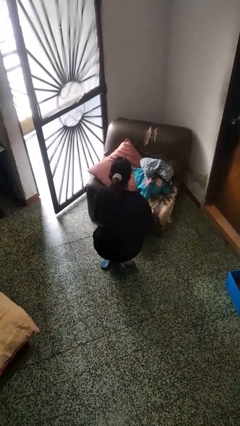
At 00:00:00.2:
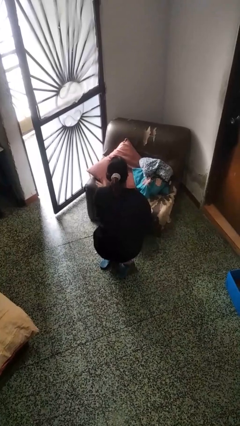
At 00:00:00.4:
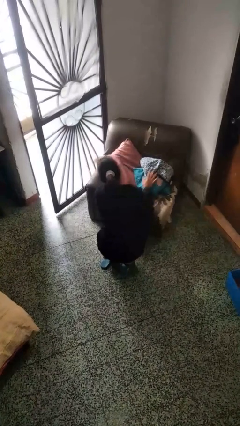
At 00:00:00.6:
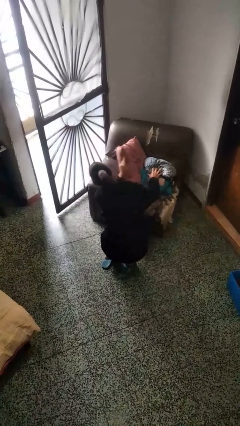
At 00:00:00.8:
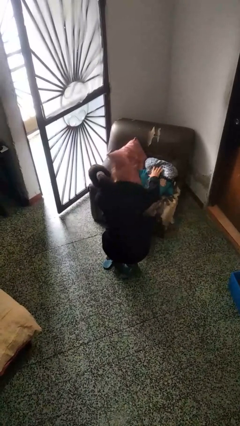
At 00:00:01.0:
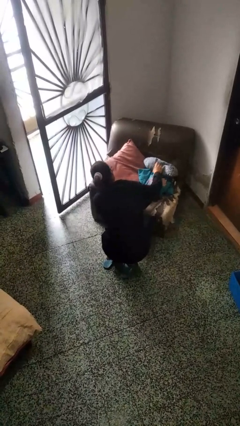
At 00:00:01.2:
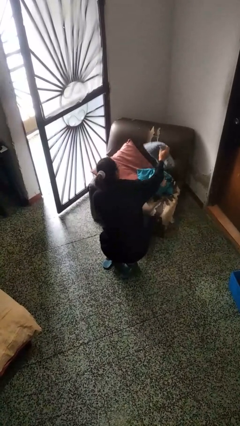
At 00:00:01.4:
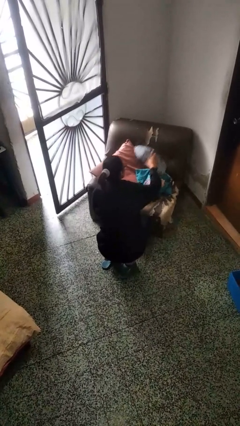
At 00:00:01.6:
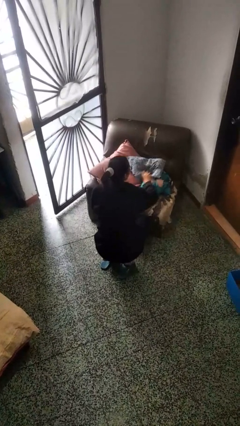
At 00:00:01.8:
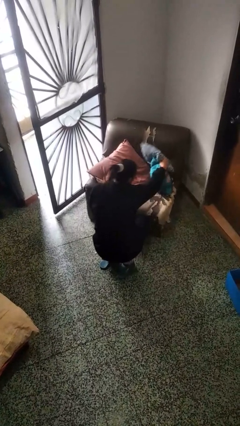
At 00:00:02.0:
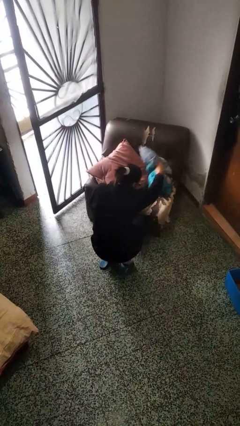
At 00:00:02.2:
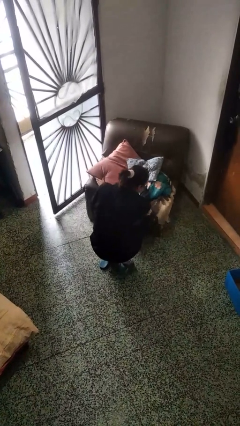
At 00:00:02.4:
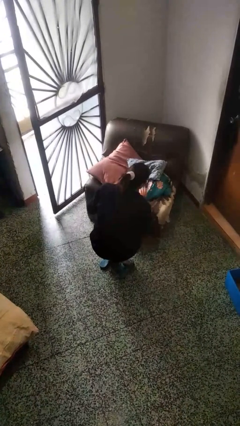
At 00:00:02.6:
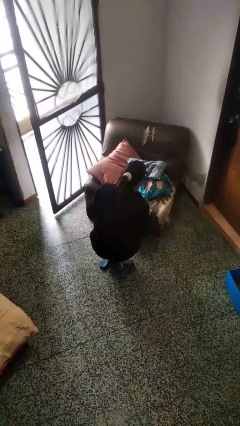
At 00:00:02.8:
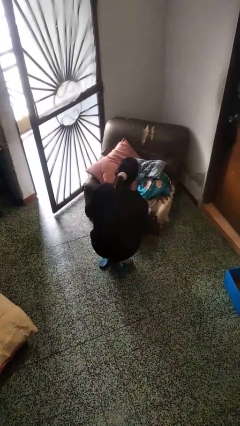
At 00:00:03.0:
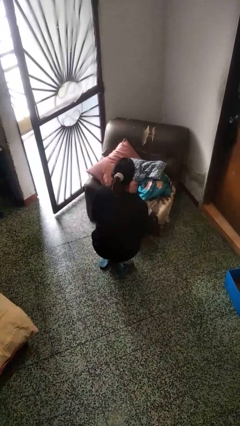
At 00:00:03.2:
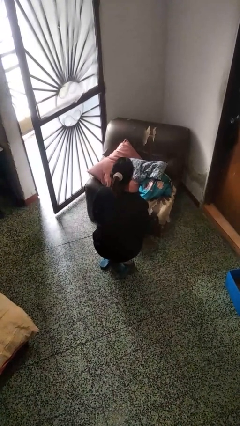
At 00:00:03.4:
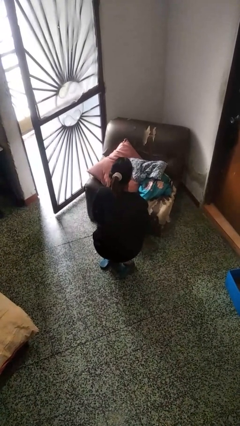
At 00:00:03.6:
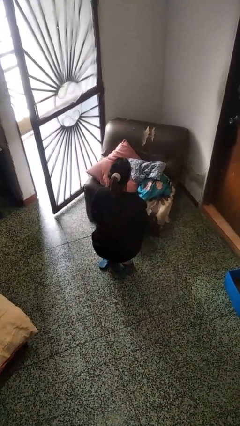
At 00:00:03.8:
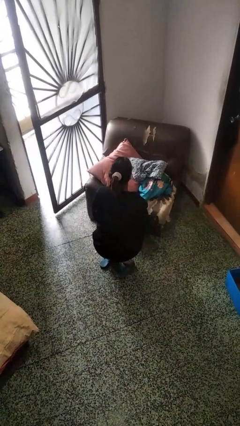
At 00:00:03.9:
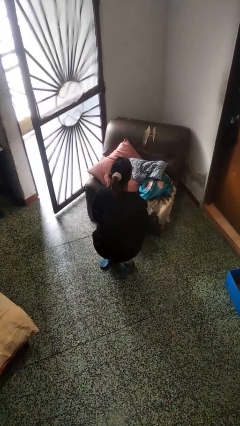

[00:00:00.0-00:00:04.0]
person searches in couch

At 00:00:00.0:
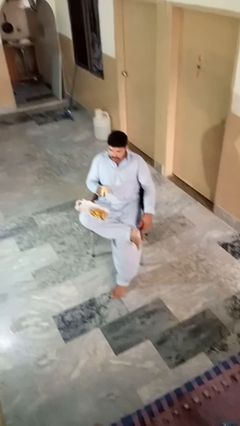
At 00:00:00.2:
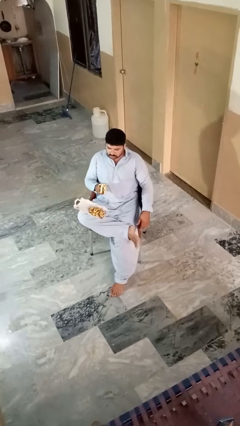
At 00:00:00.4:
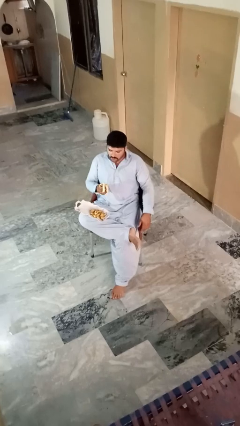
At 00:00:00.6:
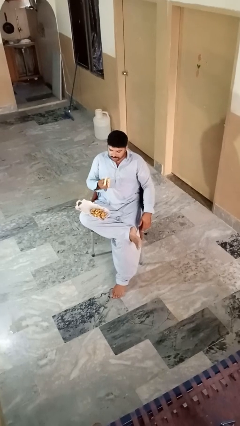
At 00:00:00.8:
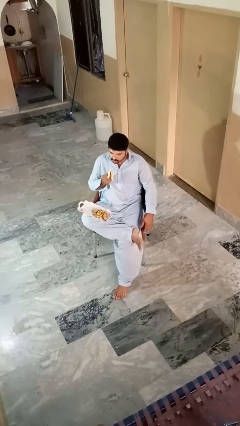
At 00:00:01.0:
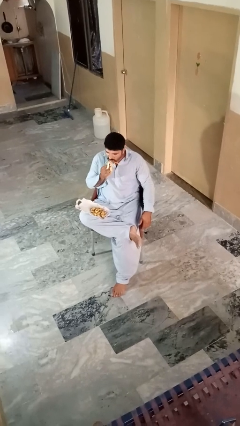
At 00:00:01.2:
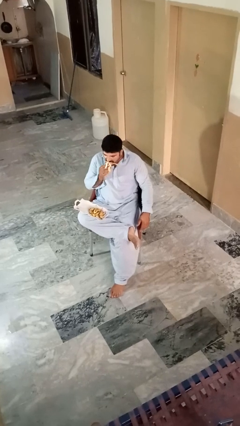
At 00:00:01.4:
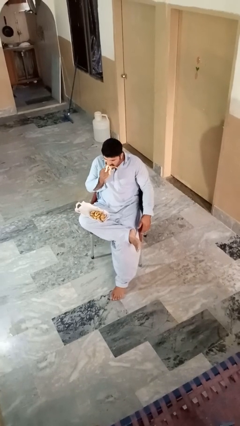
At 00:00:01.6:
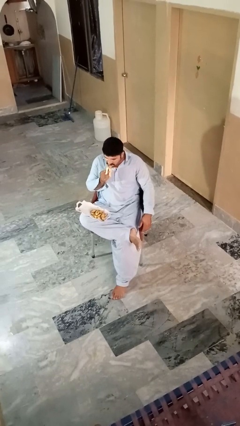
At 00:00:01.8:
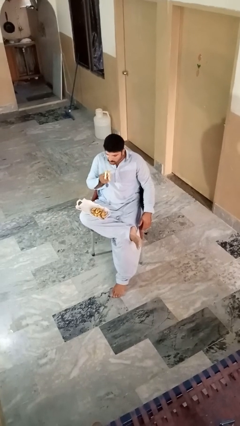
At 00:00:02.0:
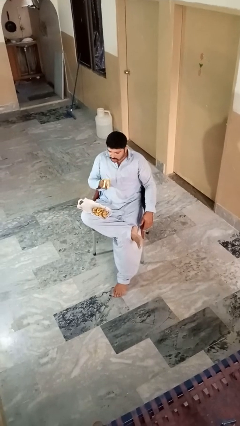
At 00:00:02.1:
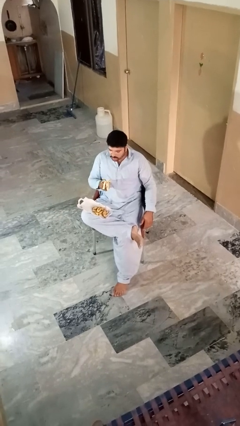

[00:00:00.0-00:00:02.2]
person eats banana

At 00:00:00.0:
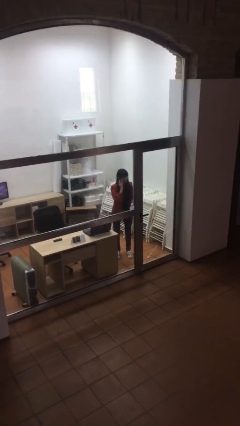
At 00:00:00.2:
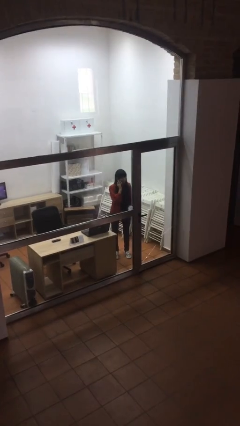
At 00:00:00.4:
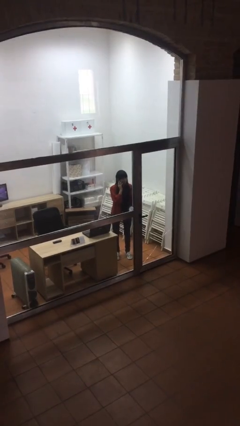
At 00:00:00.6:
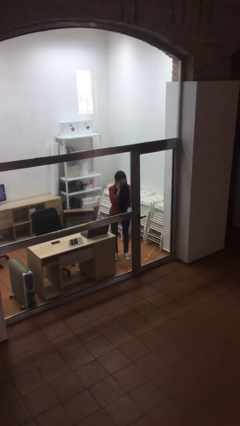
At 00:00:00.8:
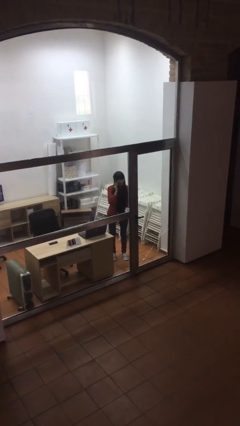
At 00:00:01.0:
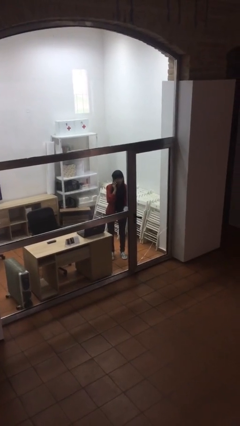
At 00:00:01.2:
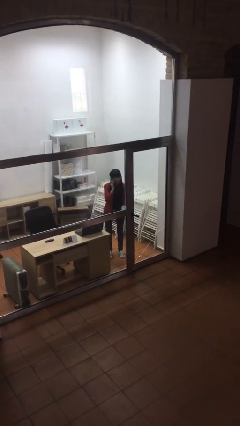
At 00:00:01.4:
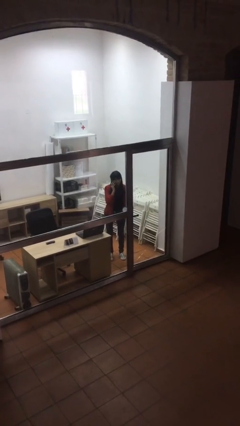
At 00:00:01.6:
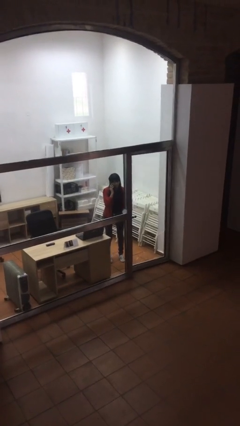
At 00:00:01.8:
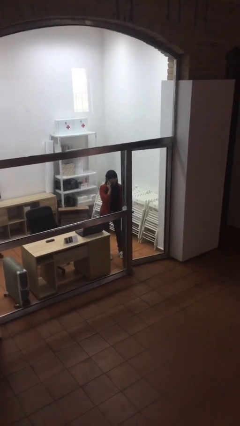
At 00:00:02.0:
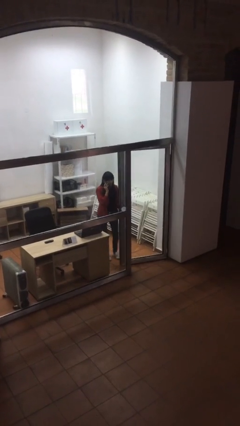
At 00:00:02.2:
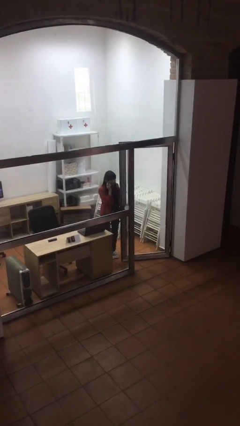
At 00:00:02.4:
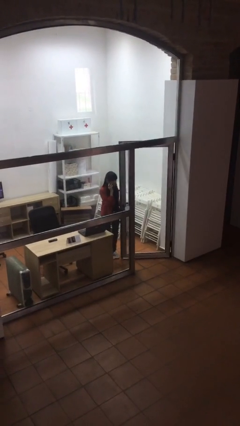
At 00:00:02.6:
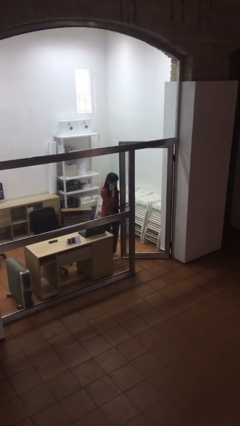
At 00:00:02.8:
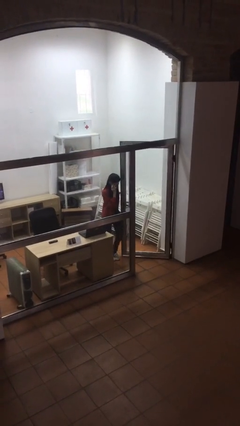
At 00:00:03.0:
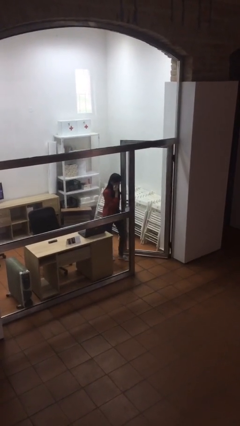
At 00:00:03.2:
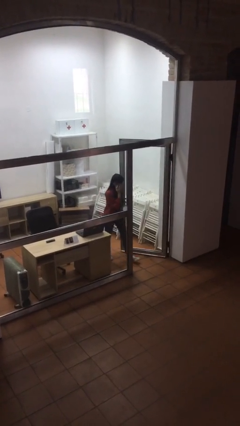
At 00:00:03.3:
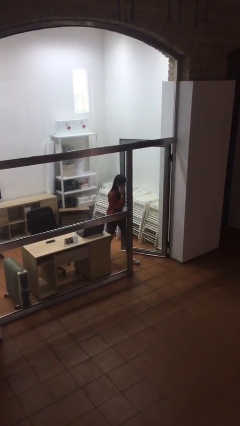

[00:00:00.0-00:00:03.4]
person opens facility door

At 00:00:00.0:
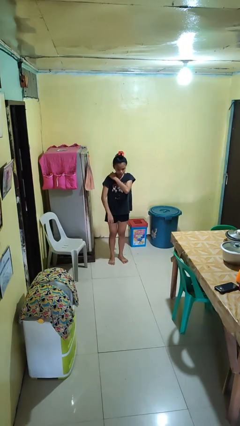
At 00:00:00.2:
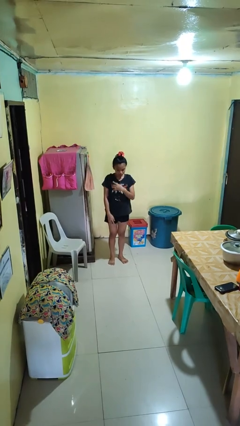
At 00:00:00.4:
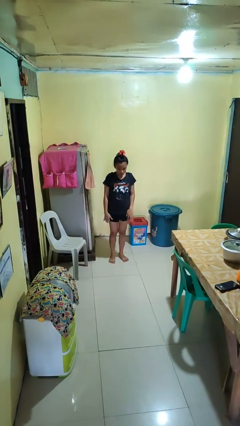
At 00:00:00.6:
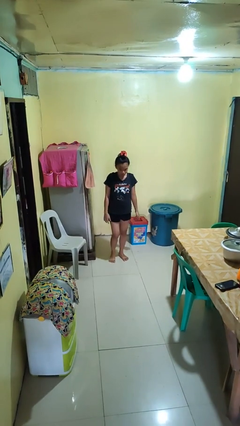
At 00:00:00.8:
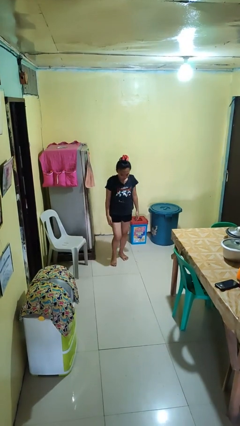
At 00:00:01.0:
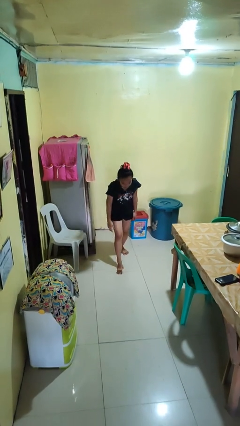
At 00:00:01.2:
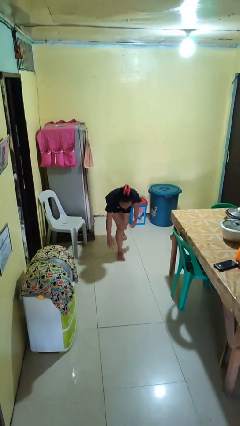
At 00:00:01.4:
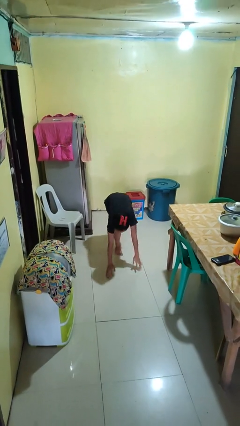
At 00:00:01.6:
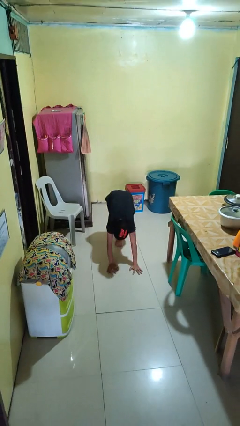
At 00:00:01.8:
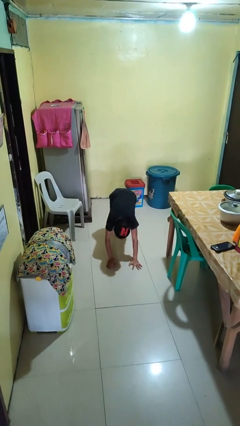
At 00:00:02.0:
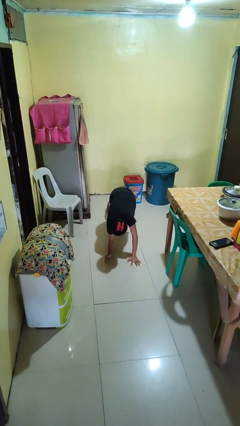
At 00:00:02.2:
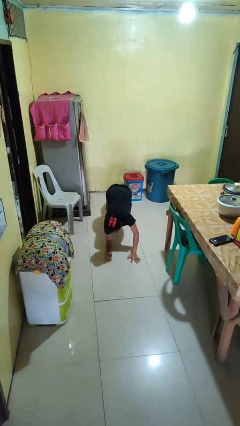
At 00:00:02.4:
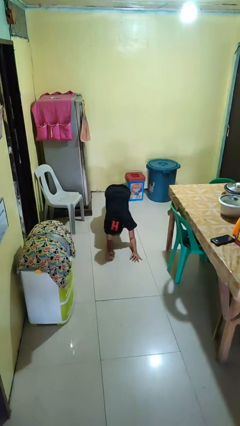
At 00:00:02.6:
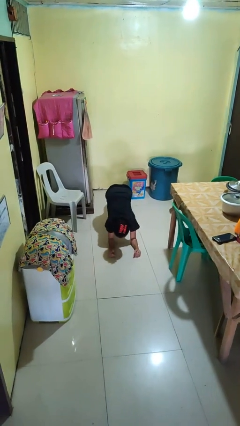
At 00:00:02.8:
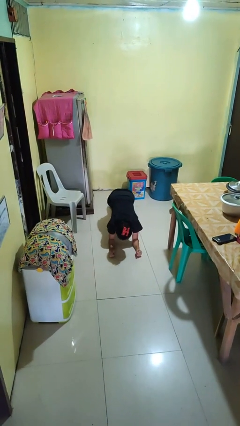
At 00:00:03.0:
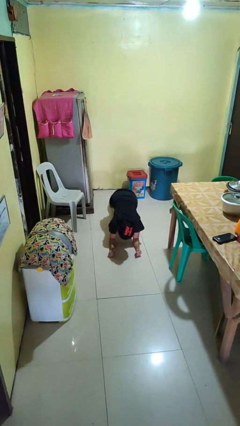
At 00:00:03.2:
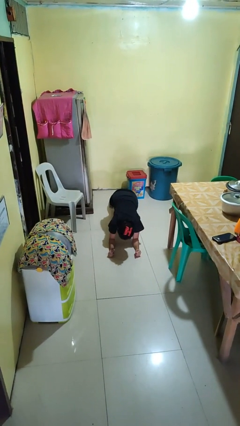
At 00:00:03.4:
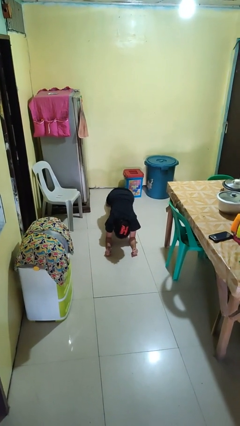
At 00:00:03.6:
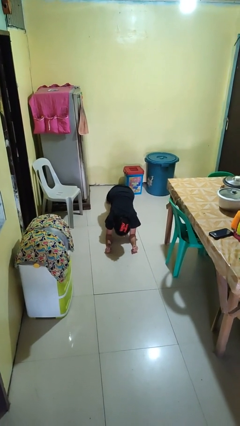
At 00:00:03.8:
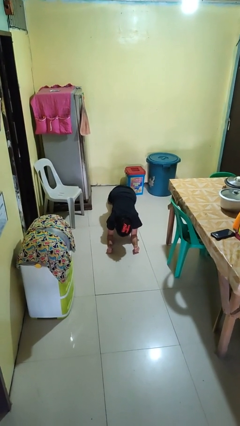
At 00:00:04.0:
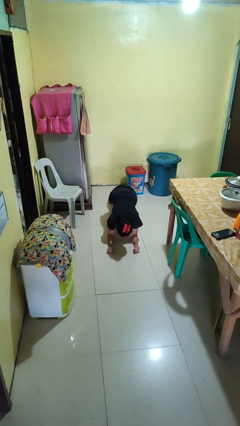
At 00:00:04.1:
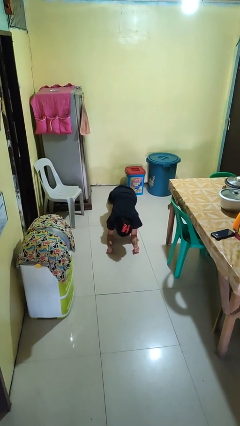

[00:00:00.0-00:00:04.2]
person exercises with plank

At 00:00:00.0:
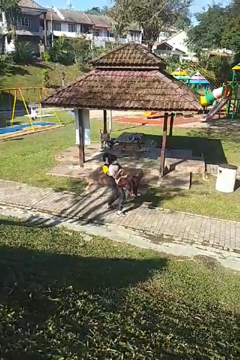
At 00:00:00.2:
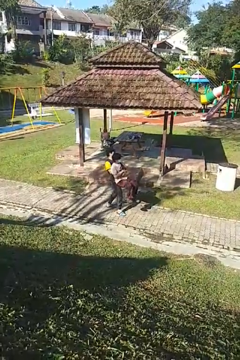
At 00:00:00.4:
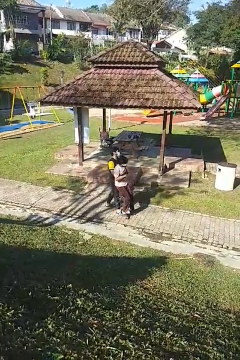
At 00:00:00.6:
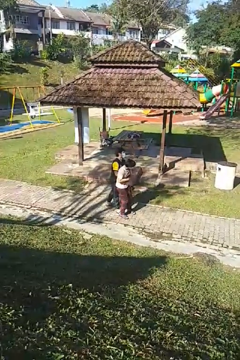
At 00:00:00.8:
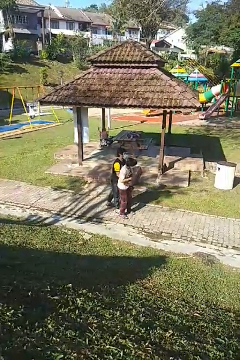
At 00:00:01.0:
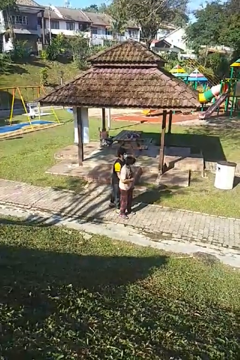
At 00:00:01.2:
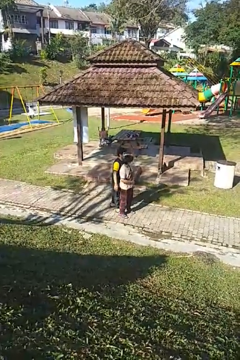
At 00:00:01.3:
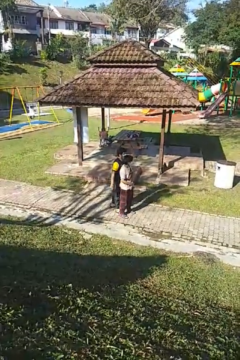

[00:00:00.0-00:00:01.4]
person puts down person

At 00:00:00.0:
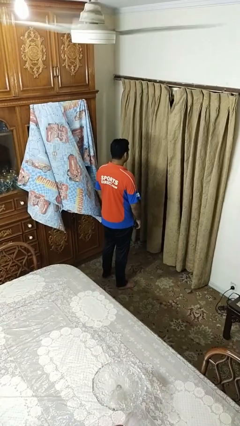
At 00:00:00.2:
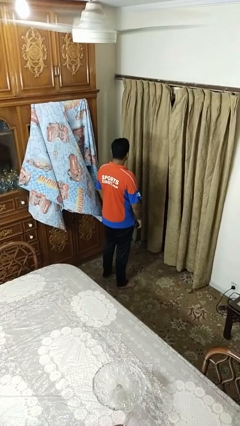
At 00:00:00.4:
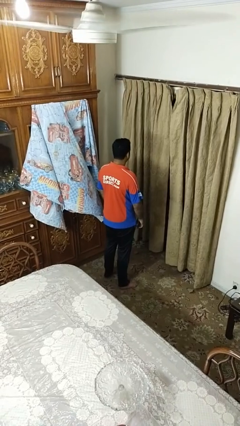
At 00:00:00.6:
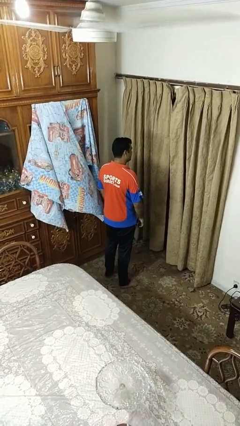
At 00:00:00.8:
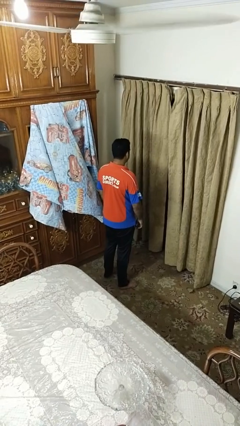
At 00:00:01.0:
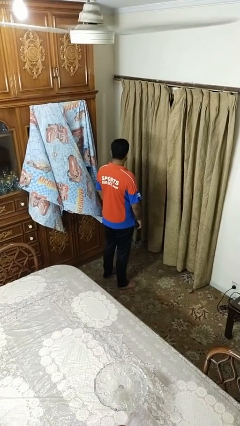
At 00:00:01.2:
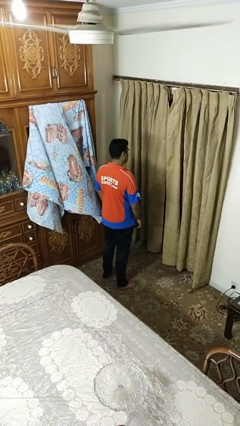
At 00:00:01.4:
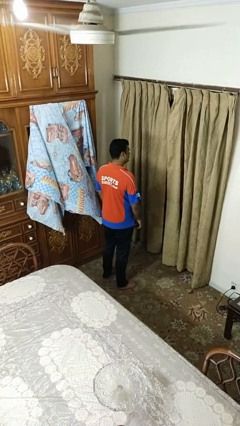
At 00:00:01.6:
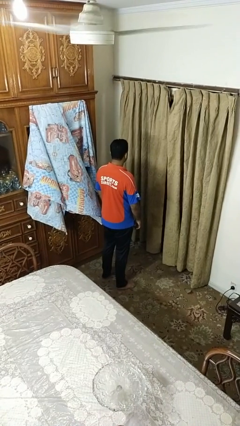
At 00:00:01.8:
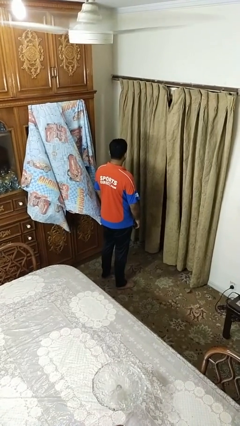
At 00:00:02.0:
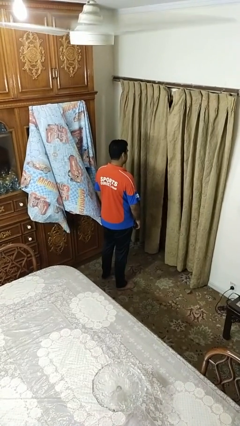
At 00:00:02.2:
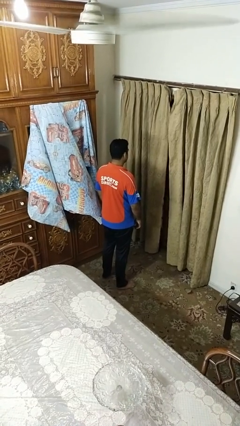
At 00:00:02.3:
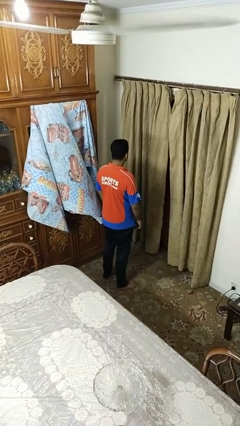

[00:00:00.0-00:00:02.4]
person shakes head
